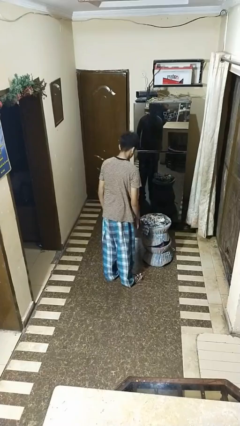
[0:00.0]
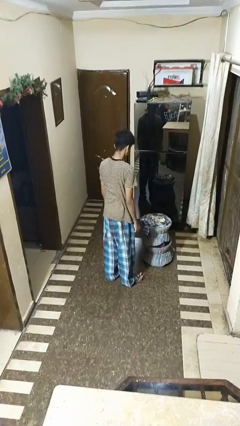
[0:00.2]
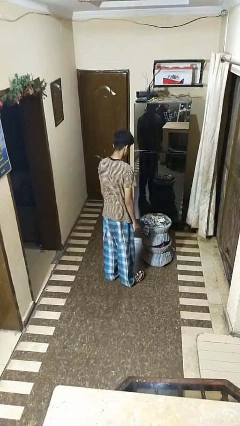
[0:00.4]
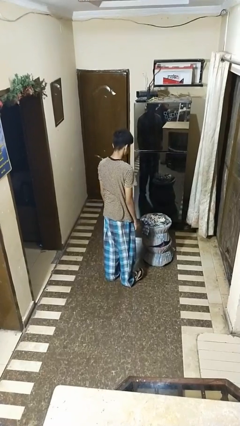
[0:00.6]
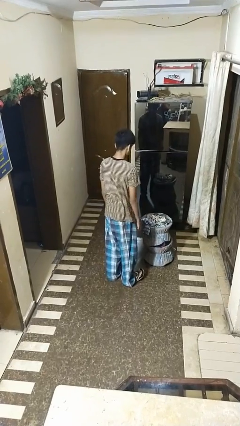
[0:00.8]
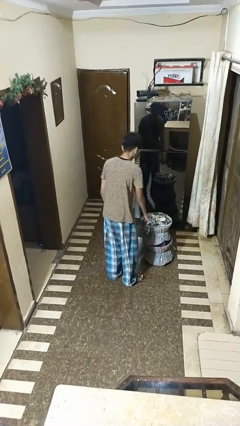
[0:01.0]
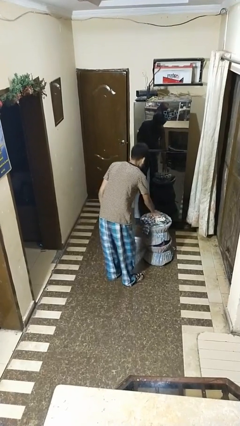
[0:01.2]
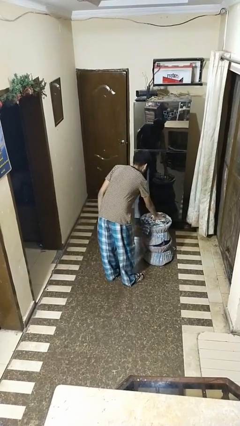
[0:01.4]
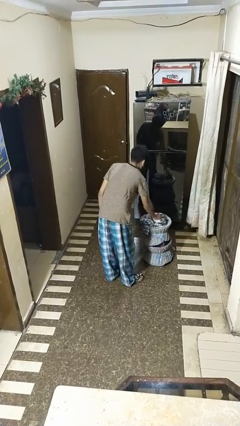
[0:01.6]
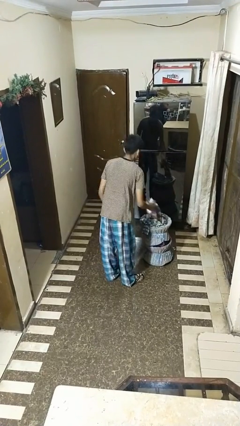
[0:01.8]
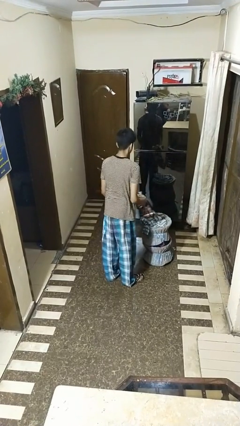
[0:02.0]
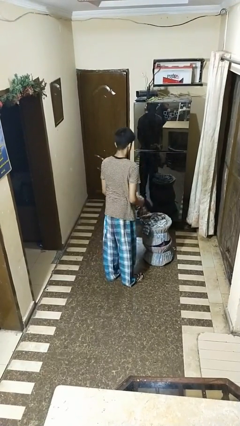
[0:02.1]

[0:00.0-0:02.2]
person takes object from basket

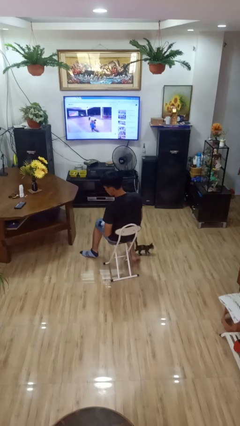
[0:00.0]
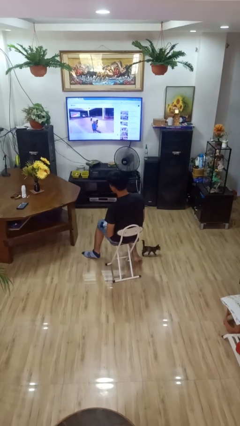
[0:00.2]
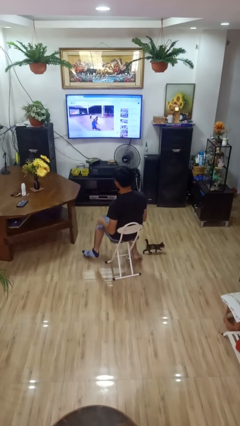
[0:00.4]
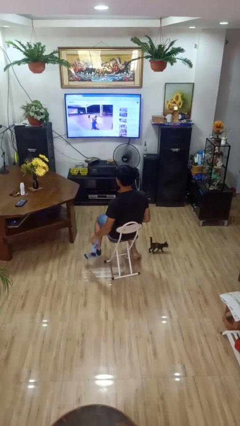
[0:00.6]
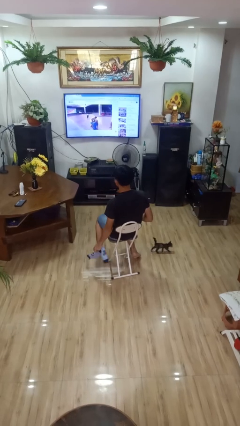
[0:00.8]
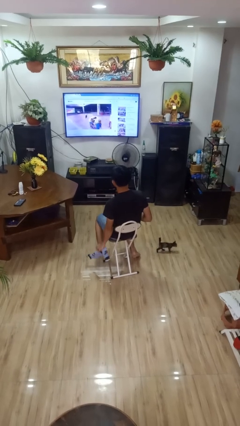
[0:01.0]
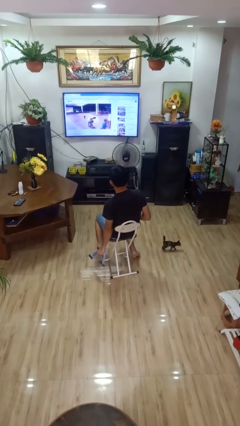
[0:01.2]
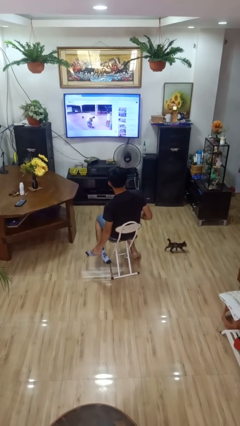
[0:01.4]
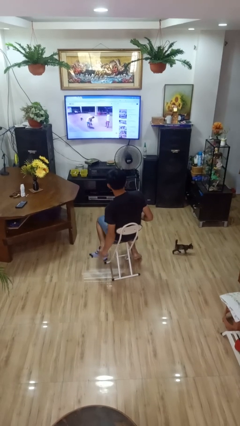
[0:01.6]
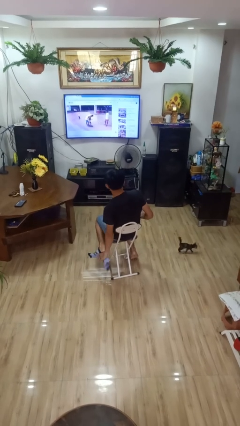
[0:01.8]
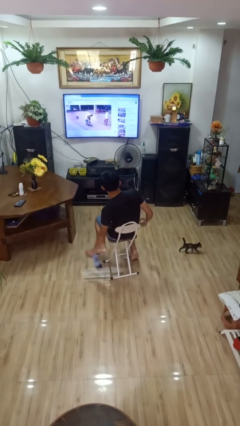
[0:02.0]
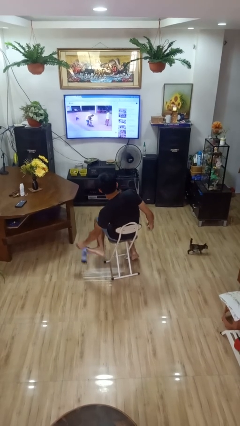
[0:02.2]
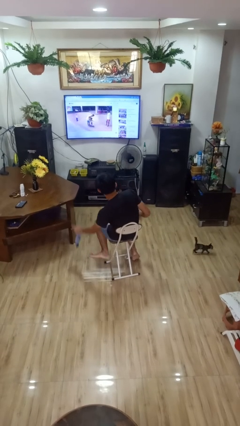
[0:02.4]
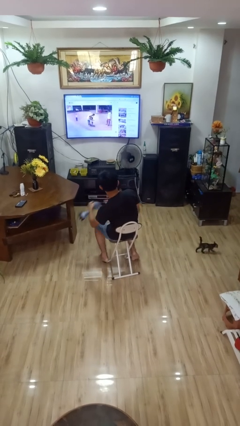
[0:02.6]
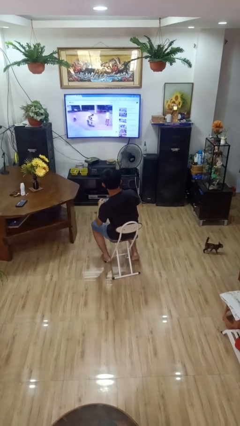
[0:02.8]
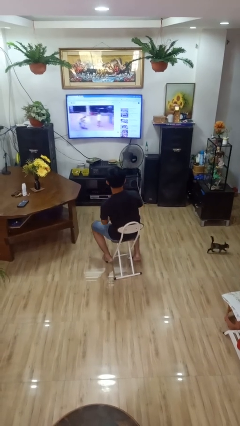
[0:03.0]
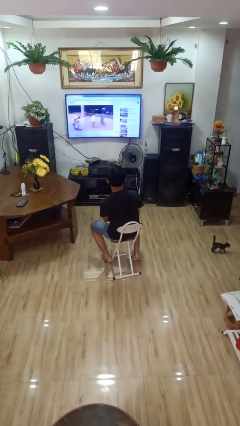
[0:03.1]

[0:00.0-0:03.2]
person takes off socks

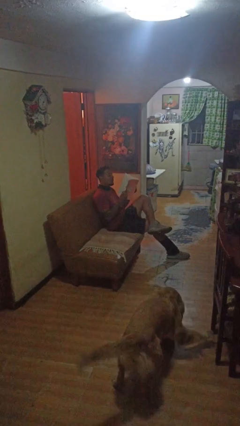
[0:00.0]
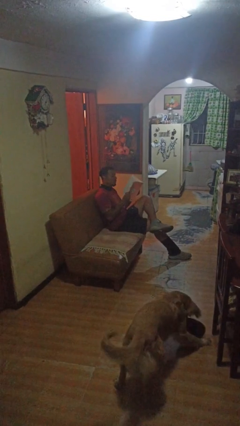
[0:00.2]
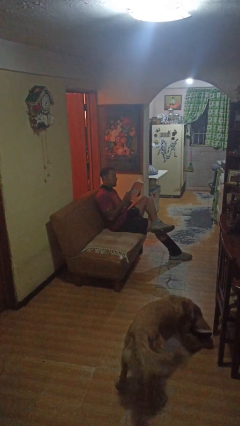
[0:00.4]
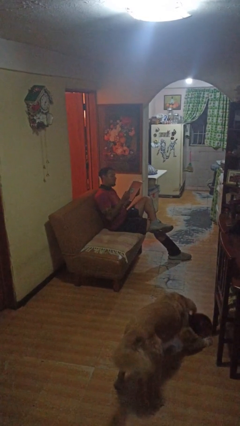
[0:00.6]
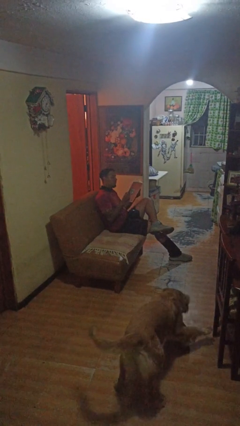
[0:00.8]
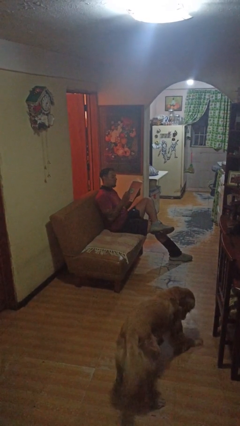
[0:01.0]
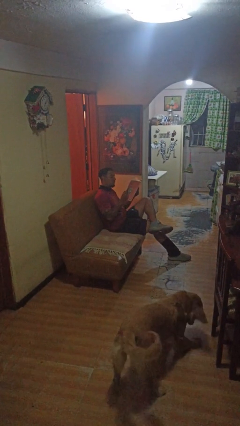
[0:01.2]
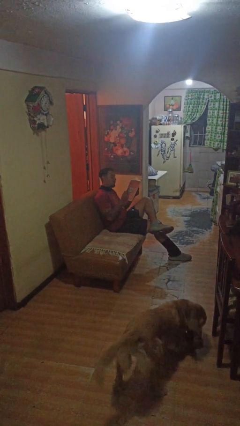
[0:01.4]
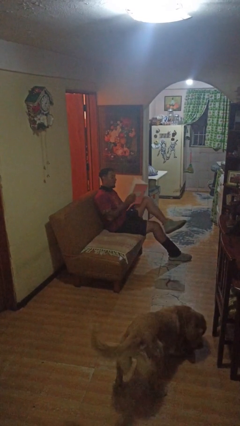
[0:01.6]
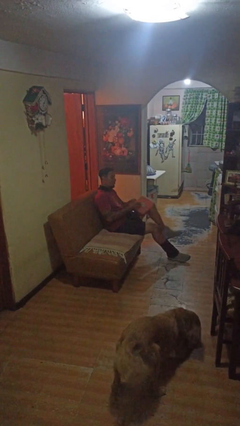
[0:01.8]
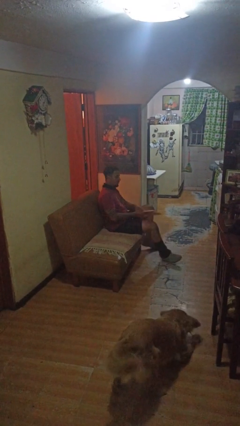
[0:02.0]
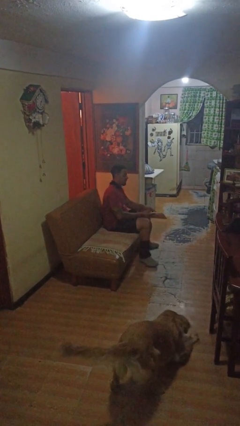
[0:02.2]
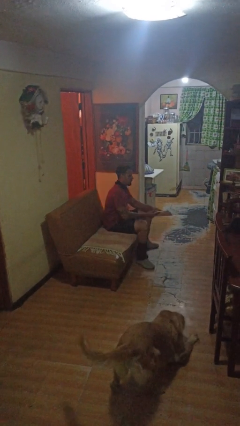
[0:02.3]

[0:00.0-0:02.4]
person reads document

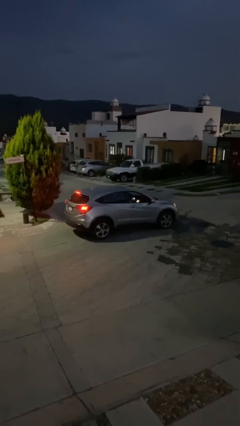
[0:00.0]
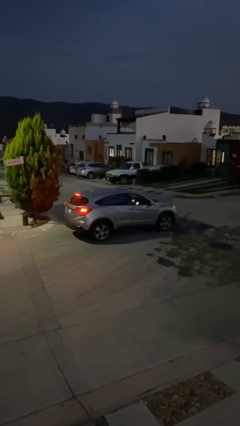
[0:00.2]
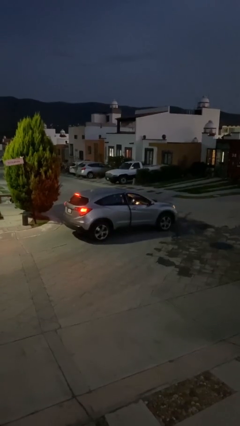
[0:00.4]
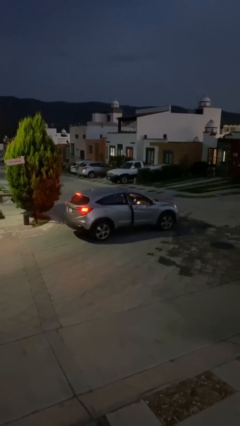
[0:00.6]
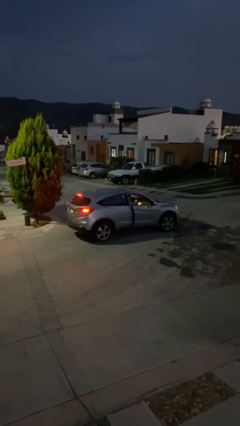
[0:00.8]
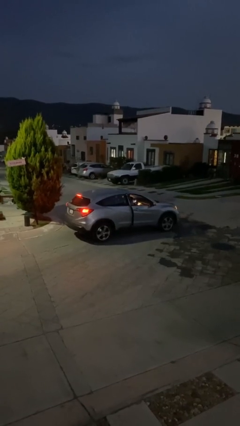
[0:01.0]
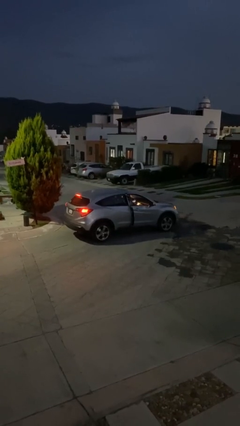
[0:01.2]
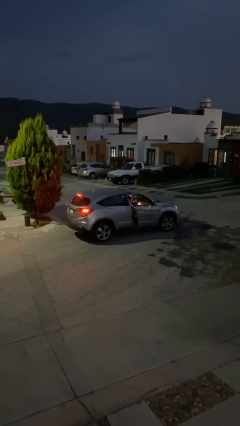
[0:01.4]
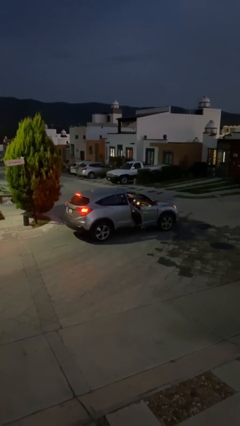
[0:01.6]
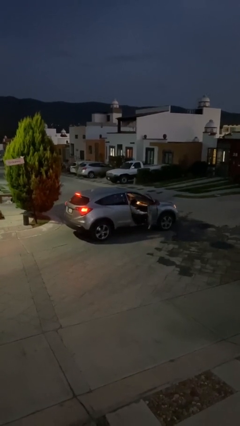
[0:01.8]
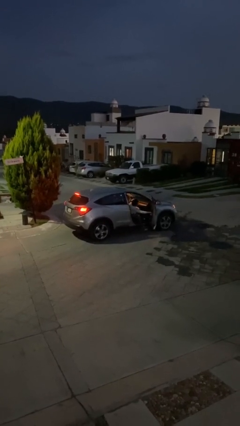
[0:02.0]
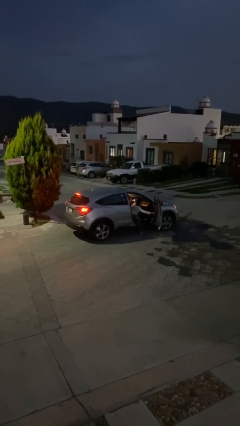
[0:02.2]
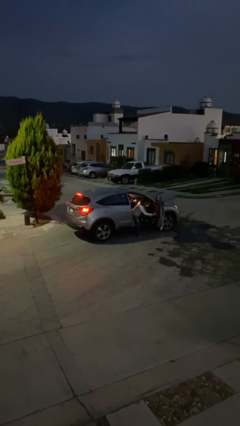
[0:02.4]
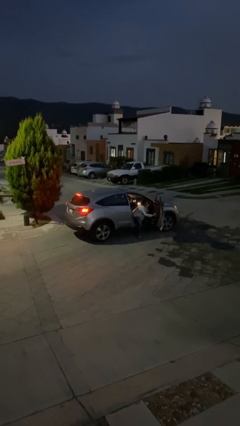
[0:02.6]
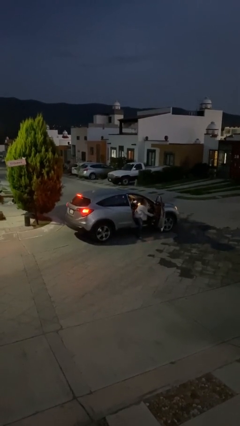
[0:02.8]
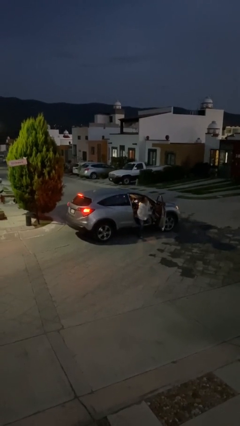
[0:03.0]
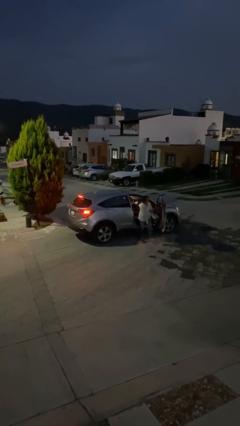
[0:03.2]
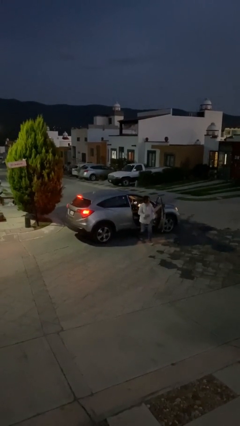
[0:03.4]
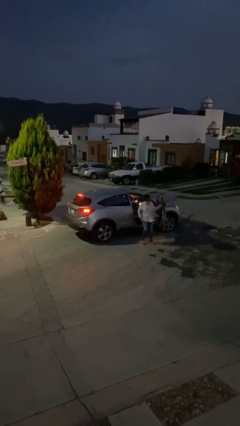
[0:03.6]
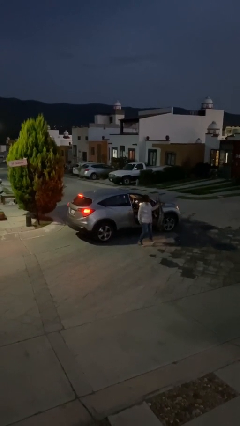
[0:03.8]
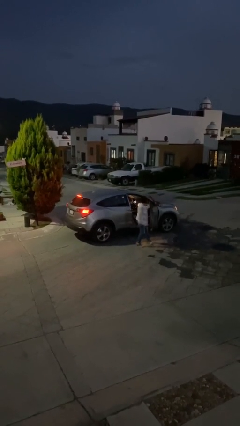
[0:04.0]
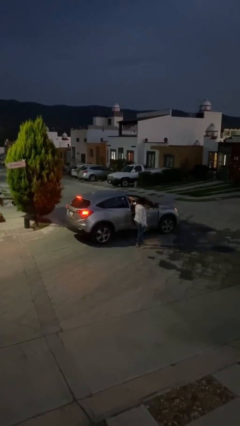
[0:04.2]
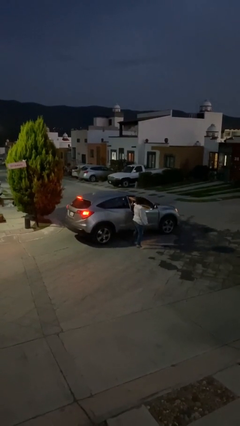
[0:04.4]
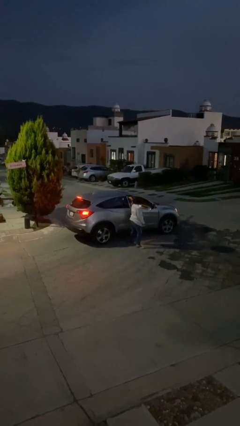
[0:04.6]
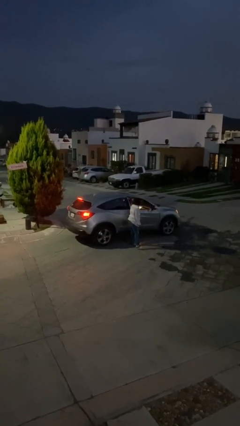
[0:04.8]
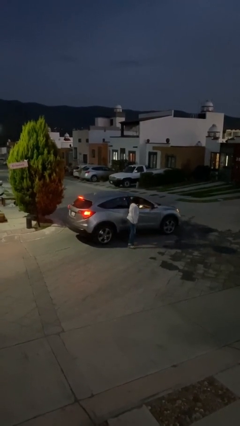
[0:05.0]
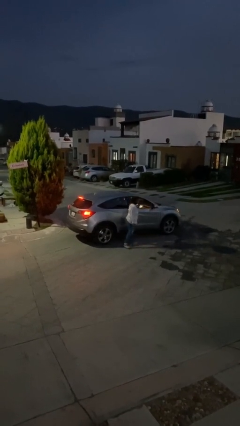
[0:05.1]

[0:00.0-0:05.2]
car drops off person

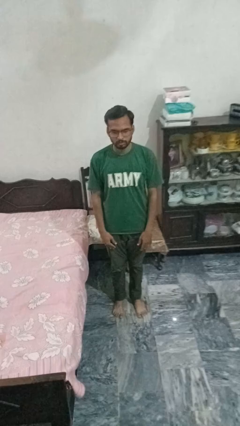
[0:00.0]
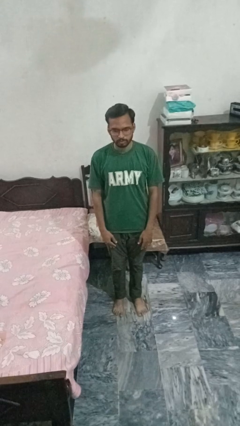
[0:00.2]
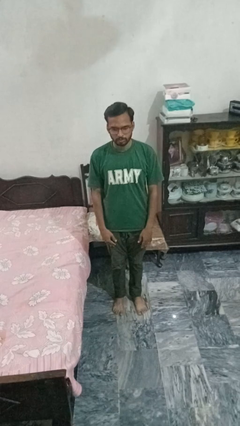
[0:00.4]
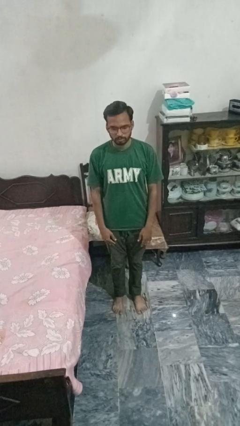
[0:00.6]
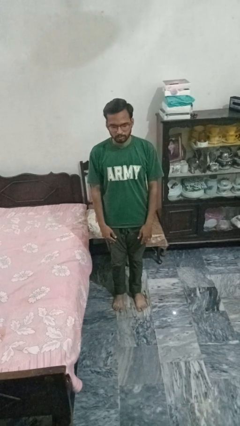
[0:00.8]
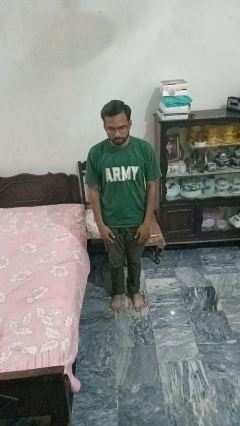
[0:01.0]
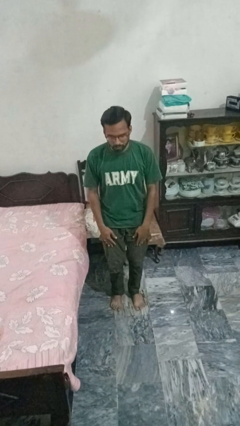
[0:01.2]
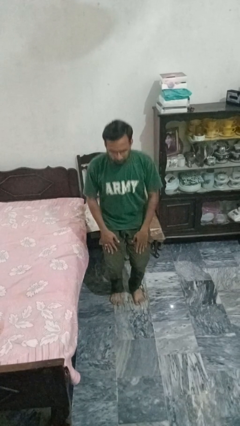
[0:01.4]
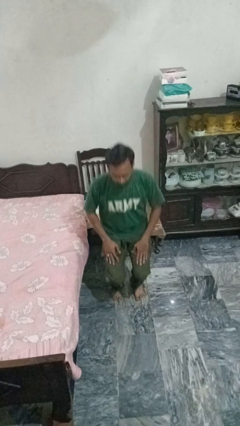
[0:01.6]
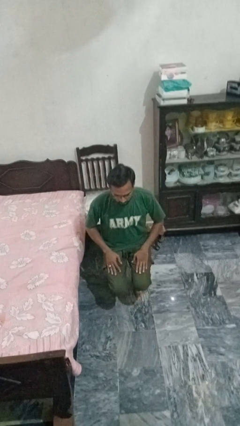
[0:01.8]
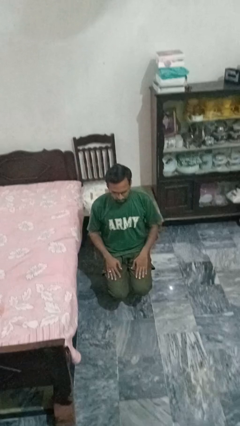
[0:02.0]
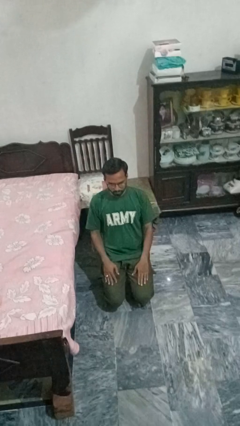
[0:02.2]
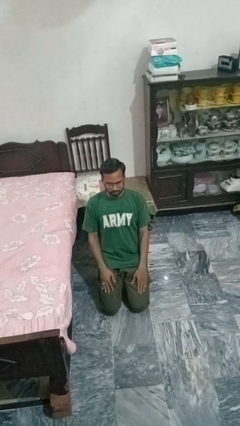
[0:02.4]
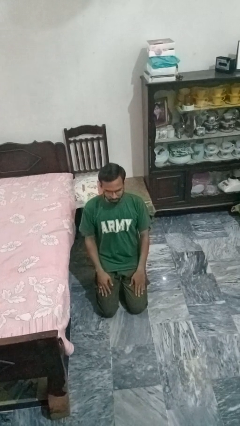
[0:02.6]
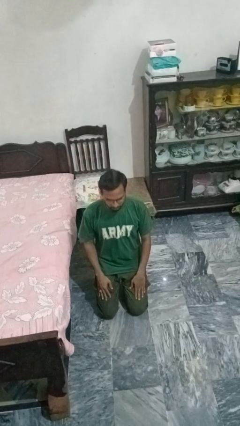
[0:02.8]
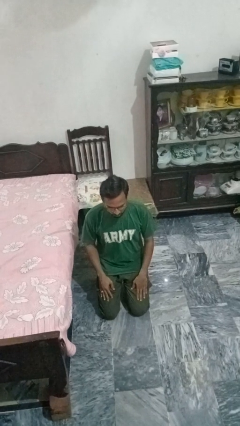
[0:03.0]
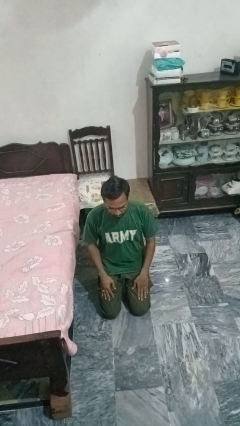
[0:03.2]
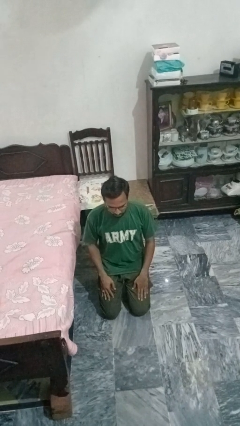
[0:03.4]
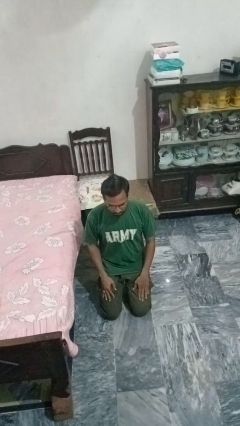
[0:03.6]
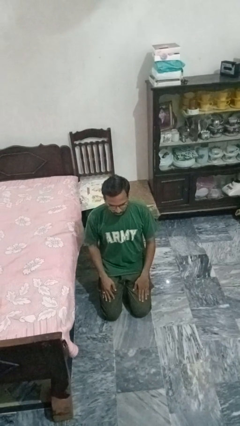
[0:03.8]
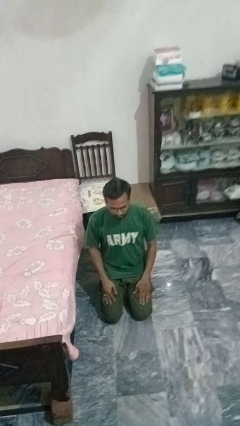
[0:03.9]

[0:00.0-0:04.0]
person kneels

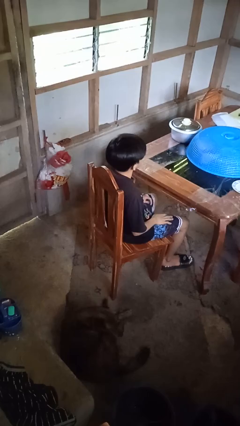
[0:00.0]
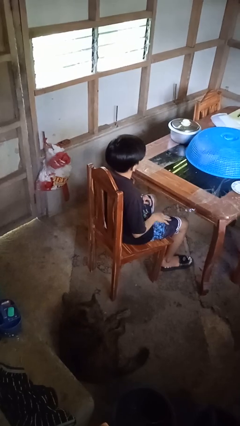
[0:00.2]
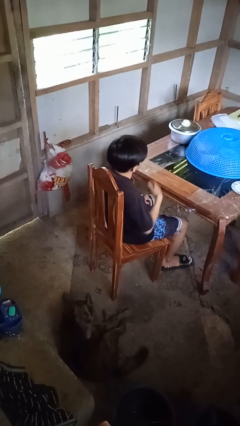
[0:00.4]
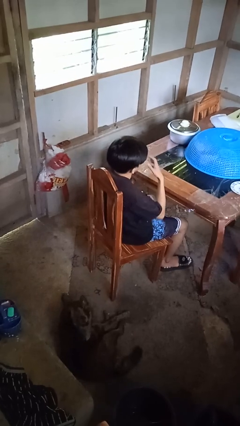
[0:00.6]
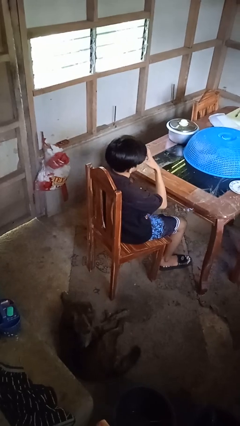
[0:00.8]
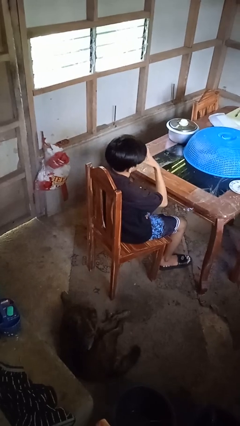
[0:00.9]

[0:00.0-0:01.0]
person licks fingers
